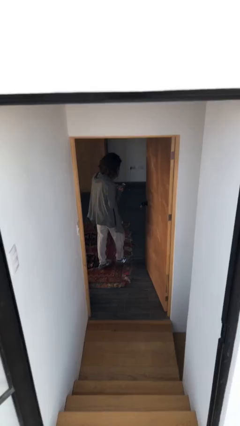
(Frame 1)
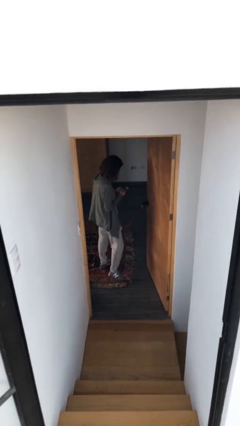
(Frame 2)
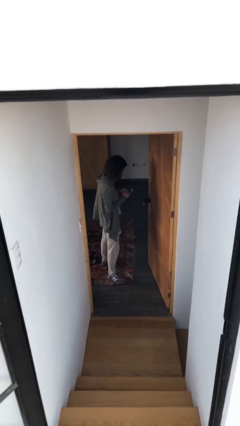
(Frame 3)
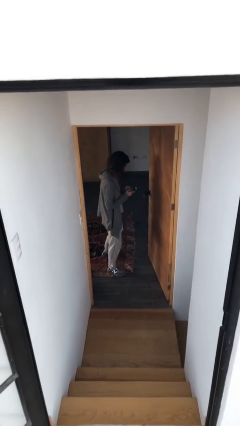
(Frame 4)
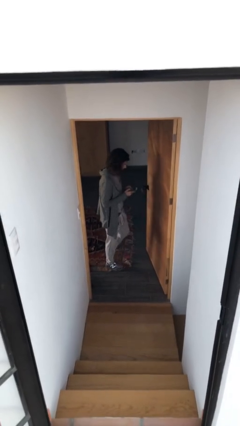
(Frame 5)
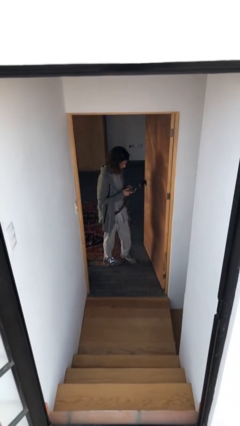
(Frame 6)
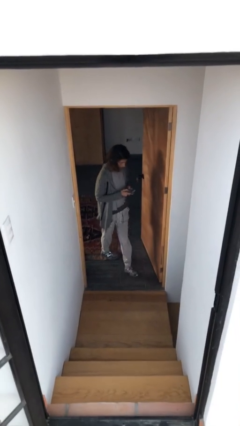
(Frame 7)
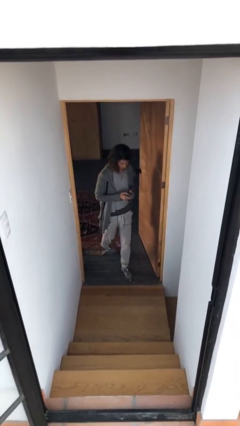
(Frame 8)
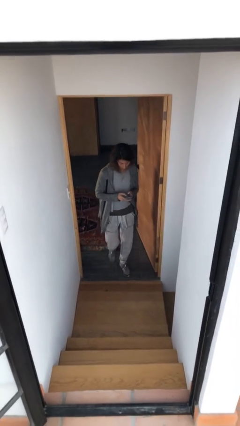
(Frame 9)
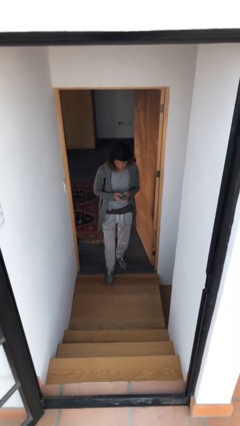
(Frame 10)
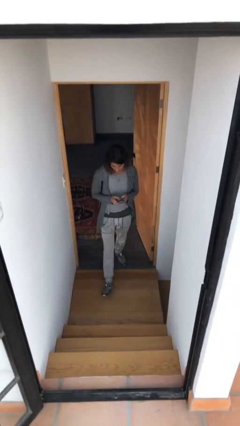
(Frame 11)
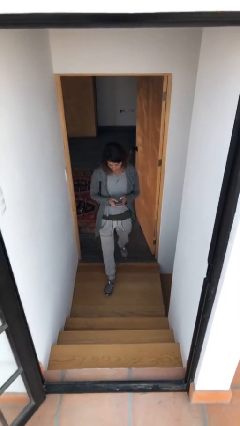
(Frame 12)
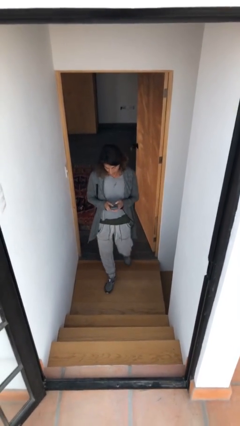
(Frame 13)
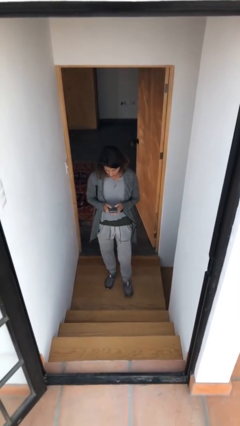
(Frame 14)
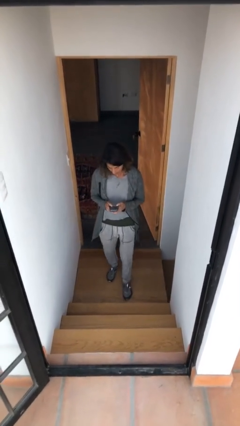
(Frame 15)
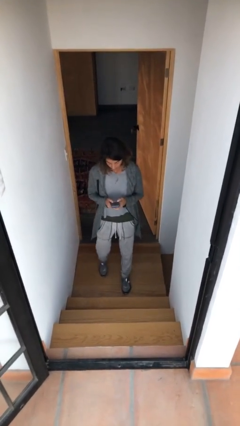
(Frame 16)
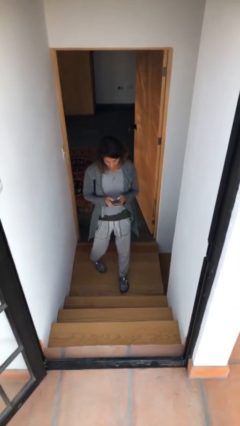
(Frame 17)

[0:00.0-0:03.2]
person enters scene through structure

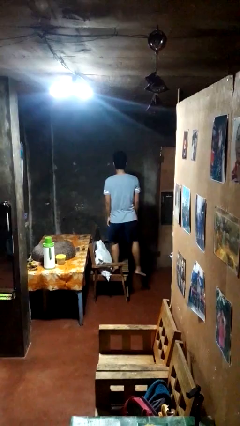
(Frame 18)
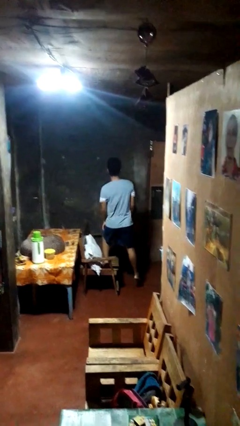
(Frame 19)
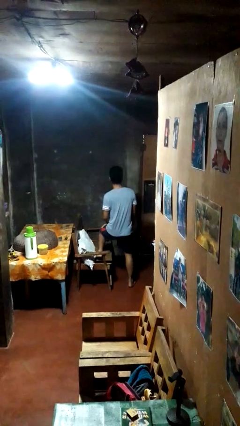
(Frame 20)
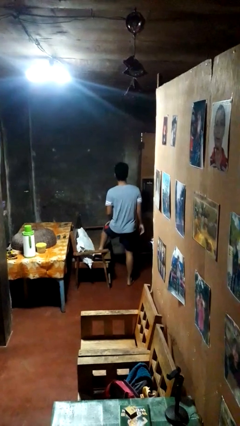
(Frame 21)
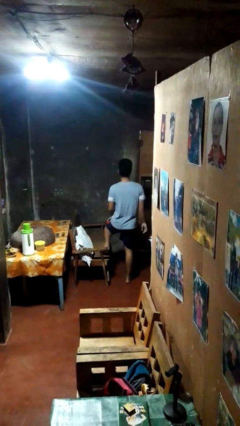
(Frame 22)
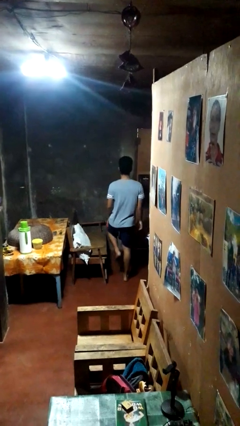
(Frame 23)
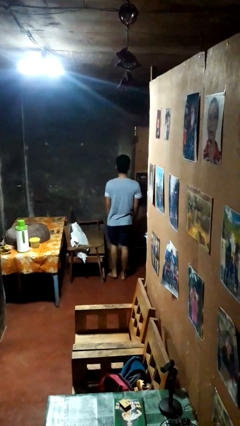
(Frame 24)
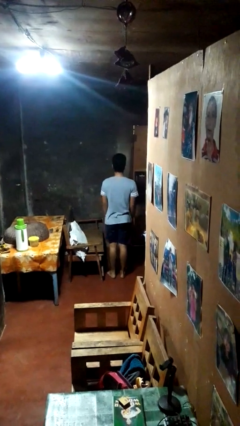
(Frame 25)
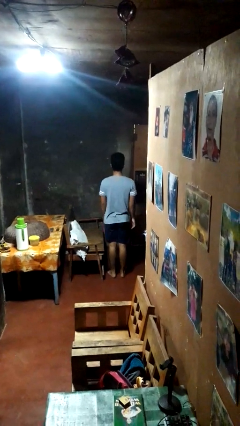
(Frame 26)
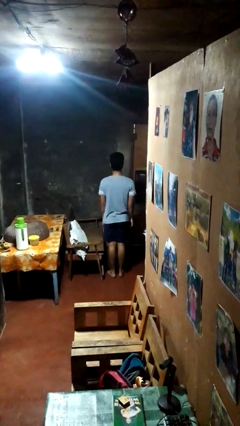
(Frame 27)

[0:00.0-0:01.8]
person climbs off couch

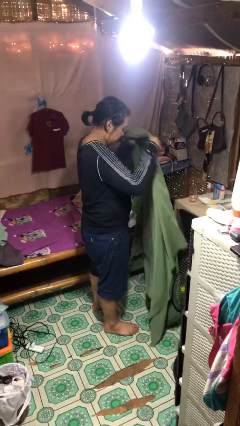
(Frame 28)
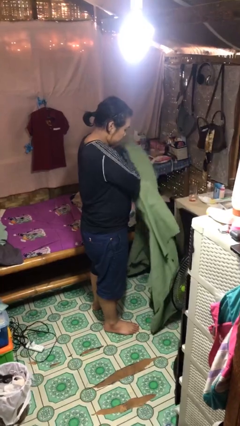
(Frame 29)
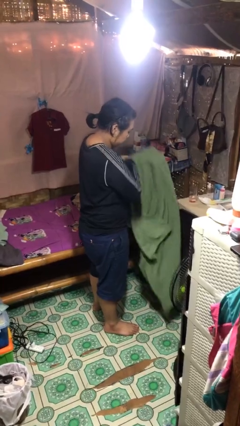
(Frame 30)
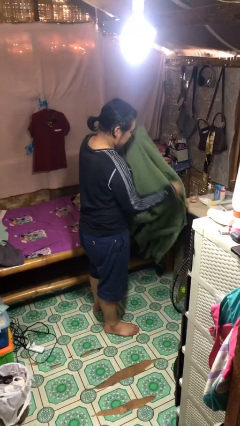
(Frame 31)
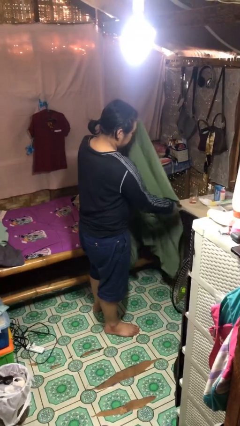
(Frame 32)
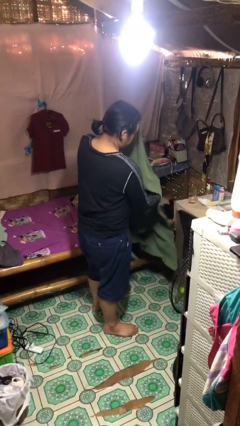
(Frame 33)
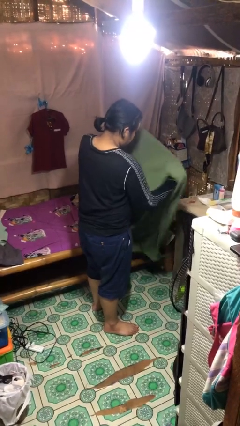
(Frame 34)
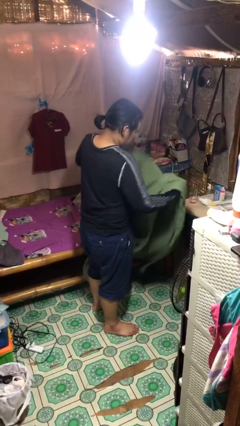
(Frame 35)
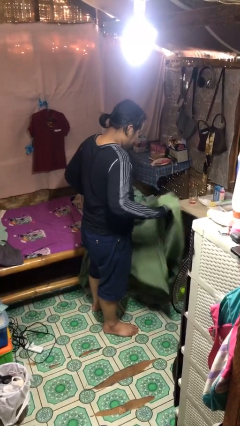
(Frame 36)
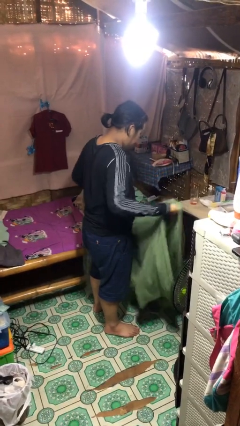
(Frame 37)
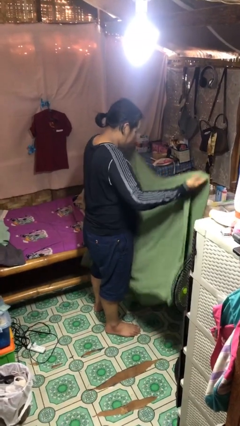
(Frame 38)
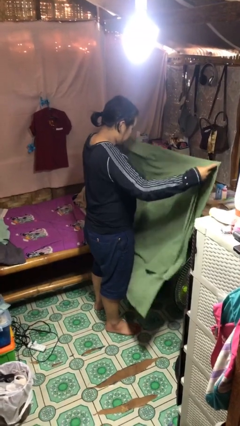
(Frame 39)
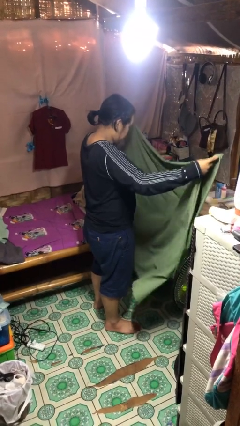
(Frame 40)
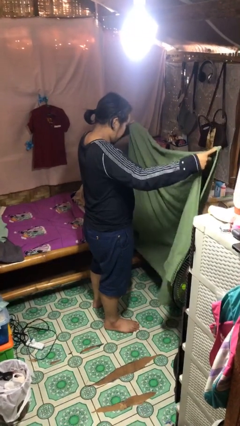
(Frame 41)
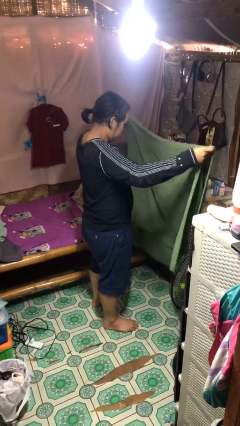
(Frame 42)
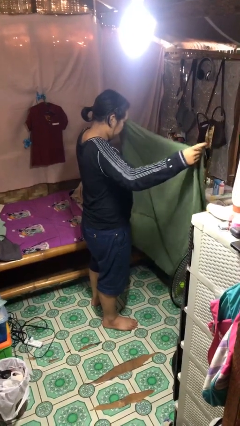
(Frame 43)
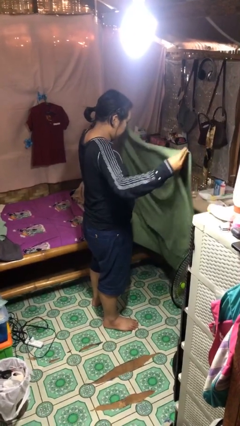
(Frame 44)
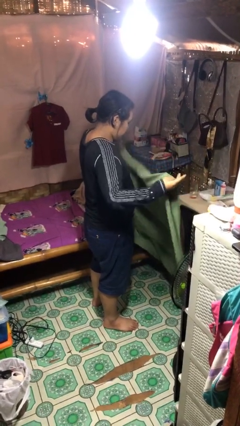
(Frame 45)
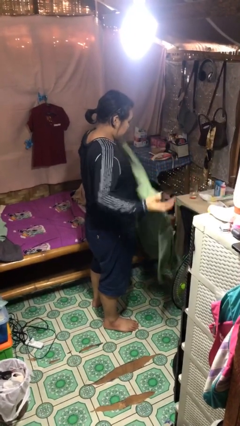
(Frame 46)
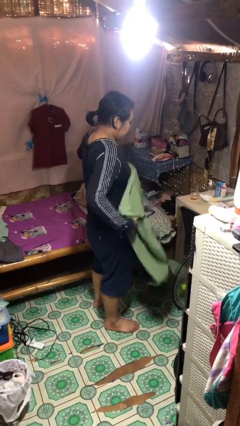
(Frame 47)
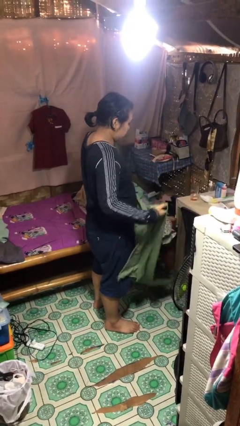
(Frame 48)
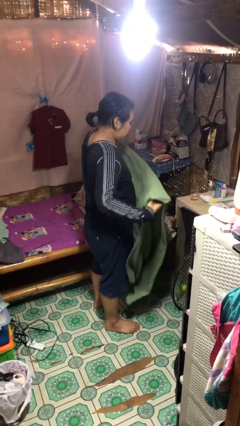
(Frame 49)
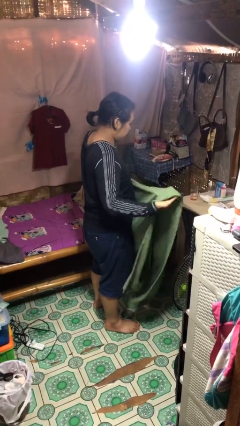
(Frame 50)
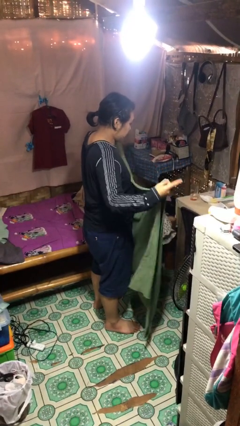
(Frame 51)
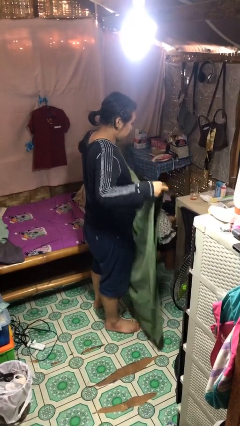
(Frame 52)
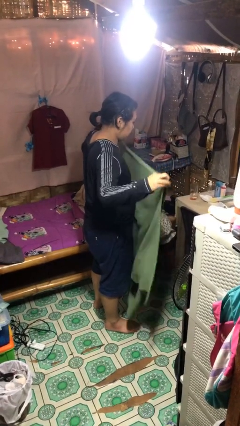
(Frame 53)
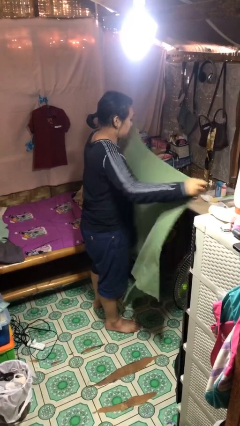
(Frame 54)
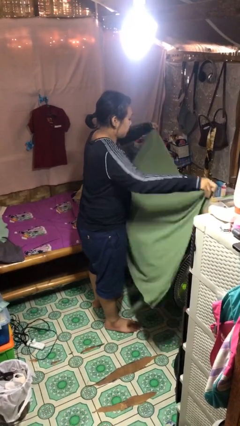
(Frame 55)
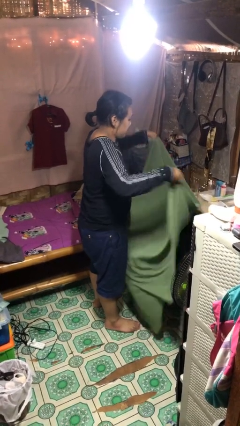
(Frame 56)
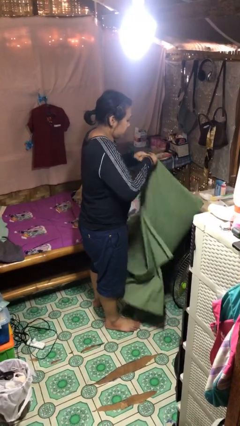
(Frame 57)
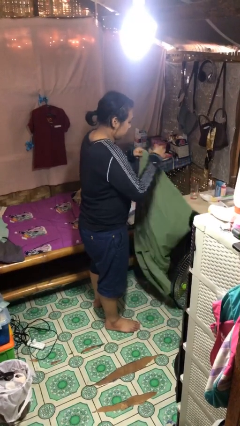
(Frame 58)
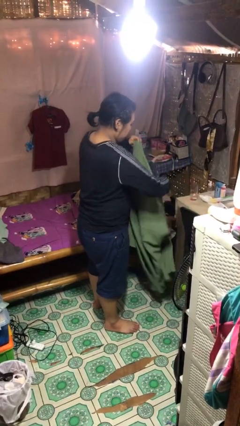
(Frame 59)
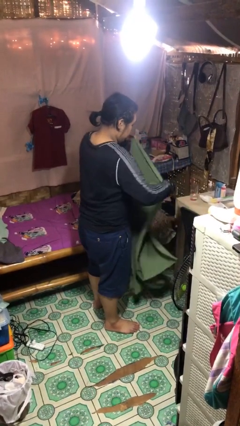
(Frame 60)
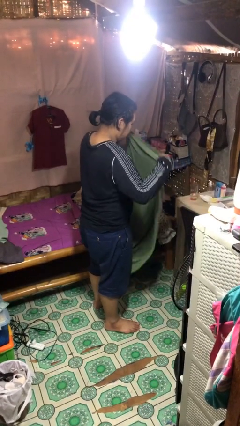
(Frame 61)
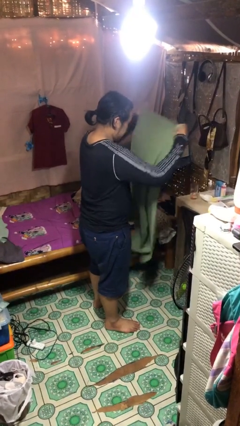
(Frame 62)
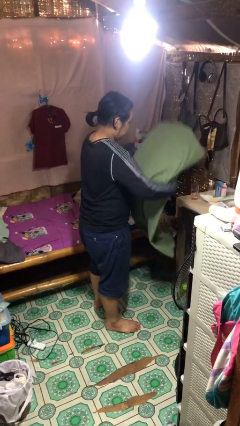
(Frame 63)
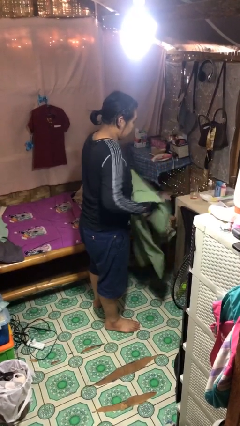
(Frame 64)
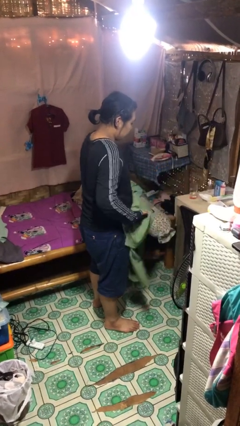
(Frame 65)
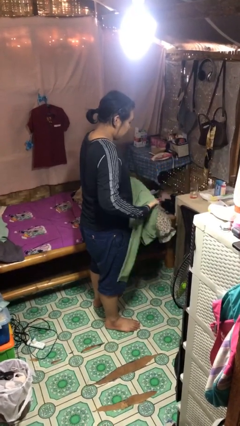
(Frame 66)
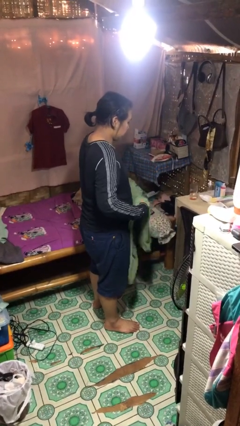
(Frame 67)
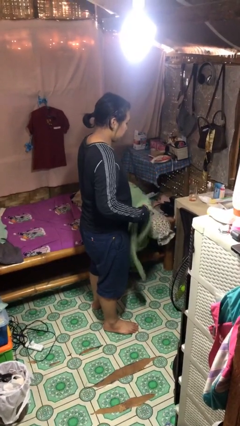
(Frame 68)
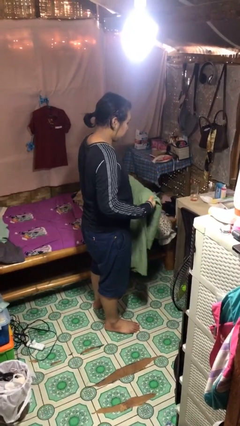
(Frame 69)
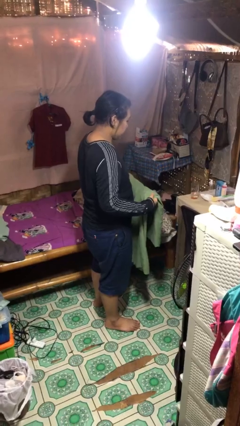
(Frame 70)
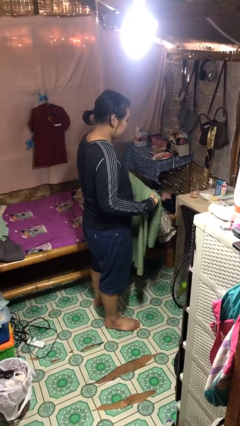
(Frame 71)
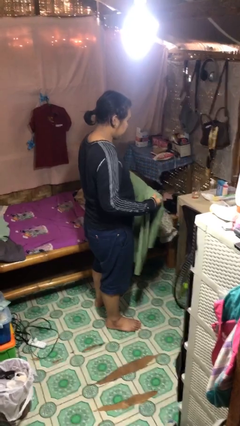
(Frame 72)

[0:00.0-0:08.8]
person folds blanket

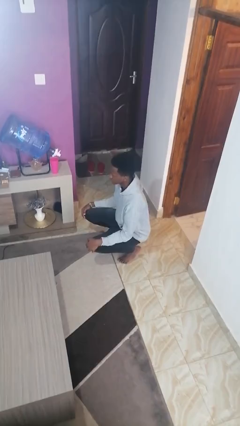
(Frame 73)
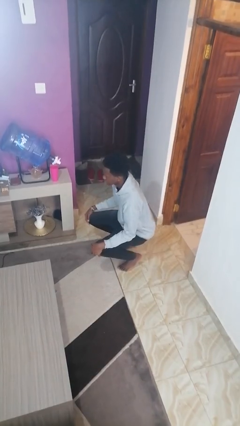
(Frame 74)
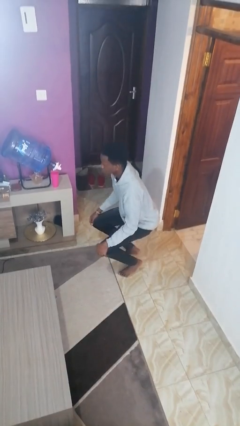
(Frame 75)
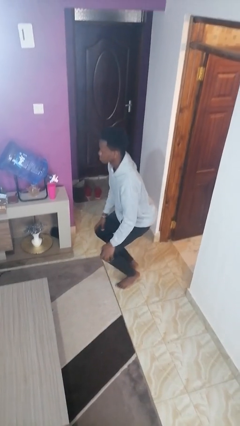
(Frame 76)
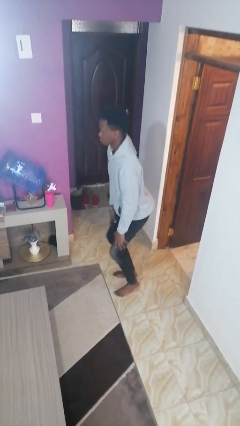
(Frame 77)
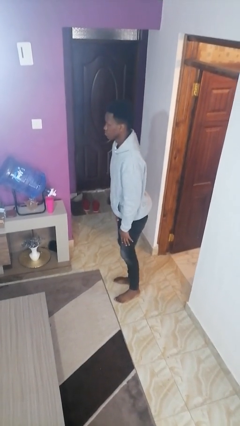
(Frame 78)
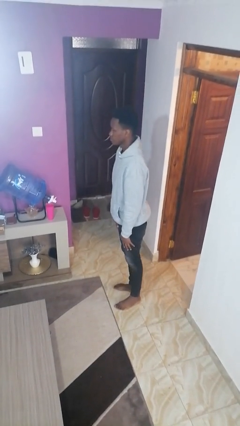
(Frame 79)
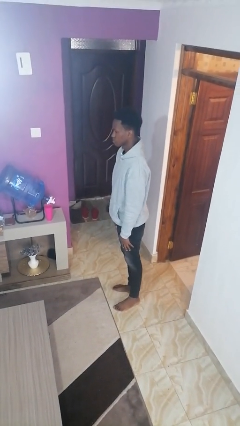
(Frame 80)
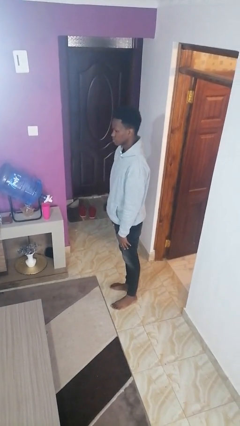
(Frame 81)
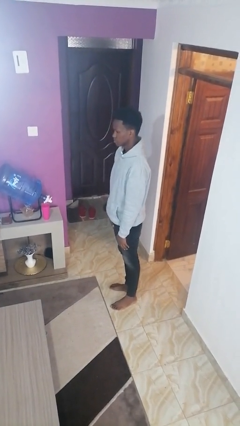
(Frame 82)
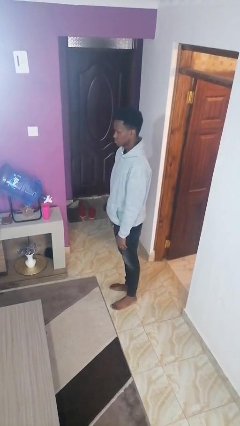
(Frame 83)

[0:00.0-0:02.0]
person stands up

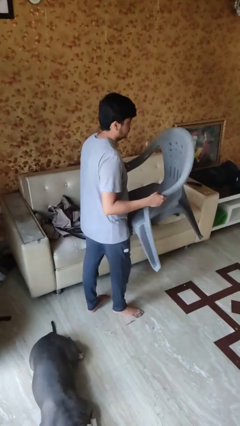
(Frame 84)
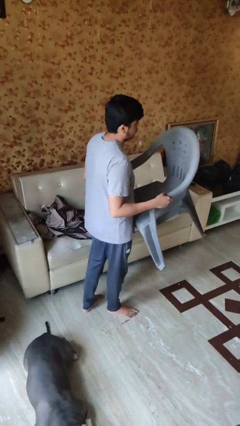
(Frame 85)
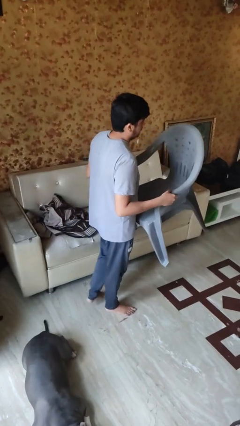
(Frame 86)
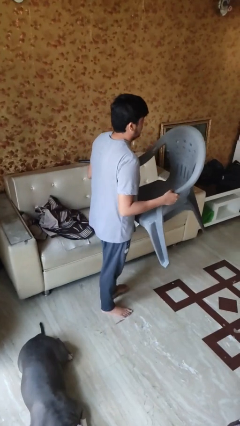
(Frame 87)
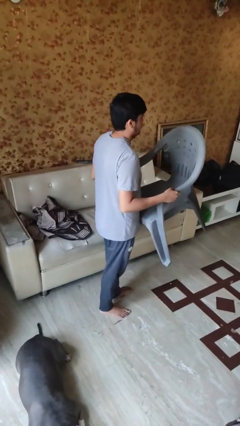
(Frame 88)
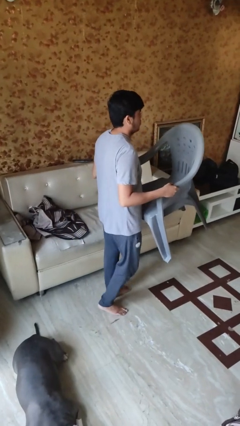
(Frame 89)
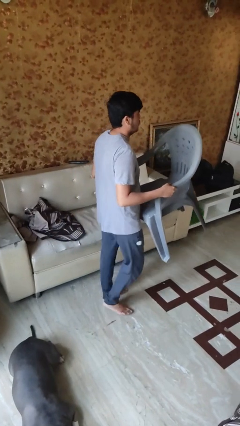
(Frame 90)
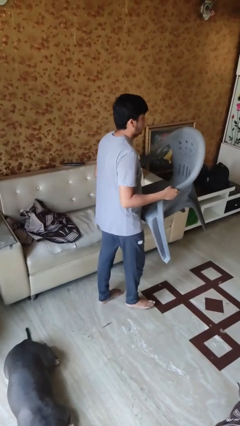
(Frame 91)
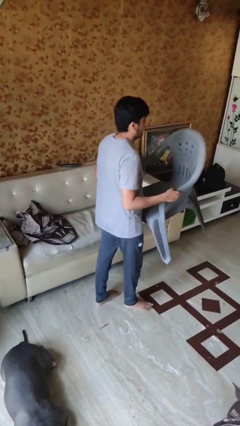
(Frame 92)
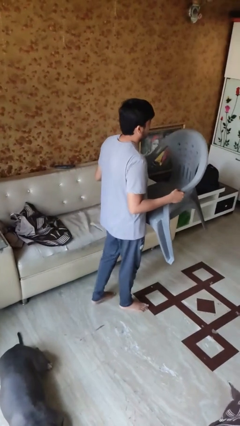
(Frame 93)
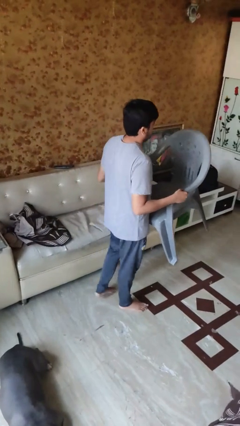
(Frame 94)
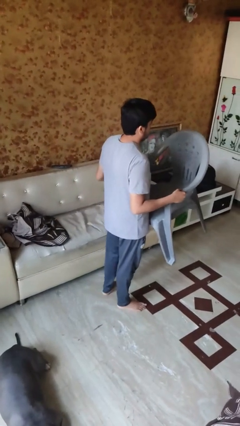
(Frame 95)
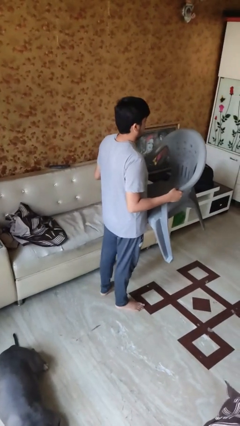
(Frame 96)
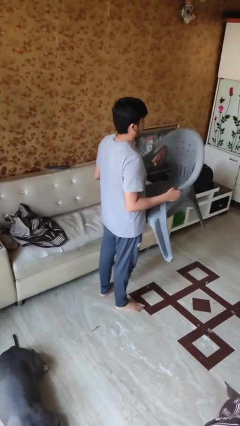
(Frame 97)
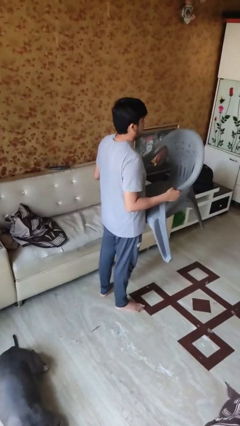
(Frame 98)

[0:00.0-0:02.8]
person carries furniture
